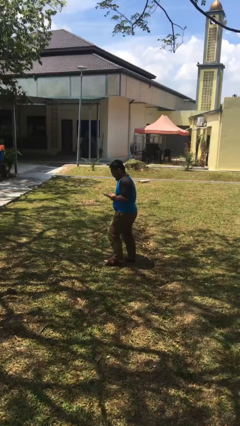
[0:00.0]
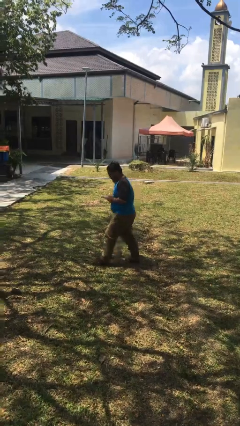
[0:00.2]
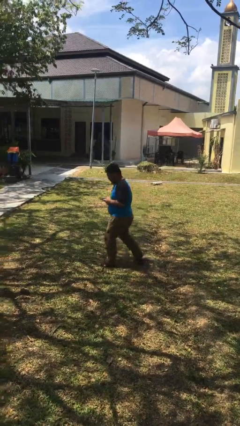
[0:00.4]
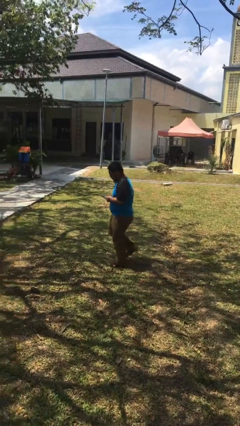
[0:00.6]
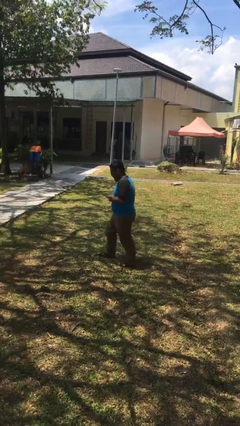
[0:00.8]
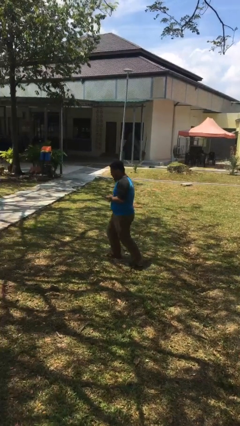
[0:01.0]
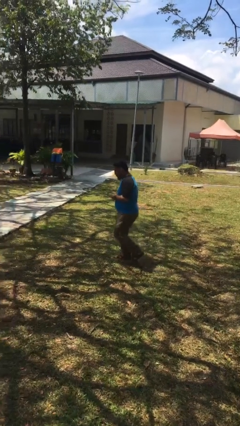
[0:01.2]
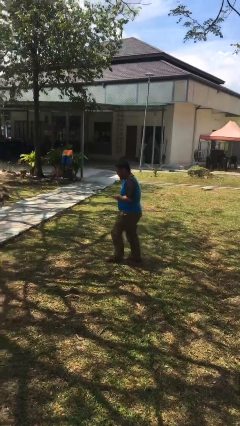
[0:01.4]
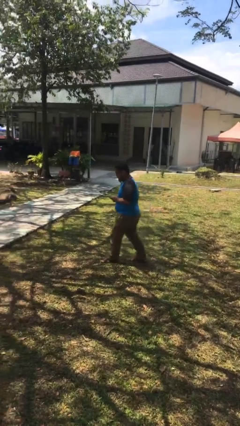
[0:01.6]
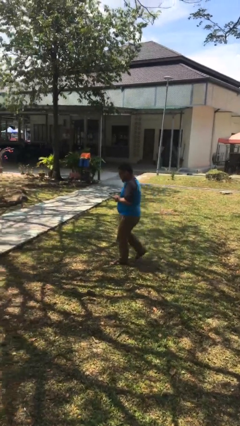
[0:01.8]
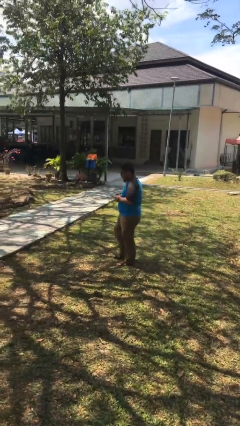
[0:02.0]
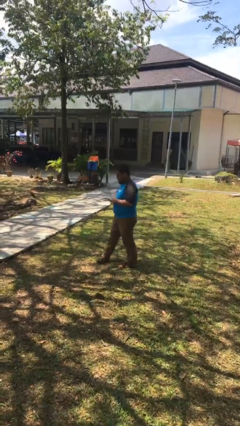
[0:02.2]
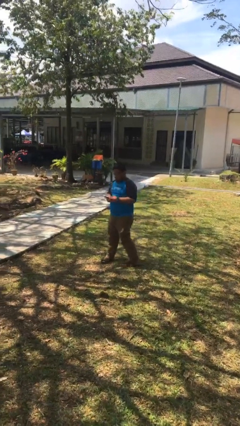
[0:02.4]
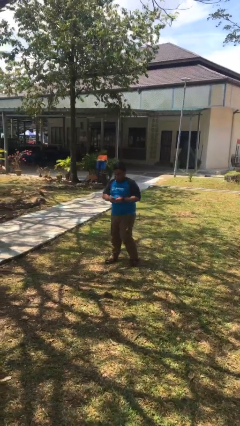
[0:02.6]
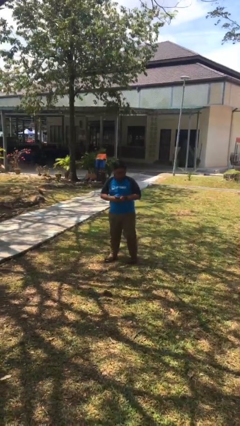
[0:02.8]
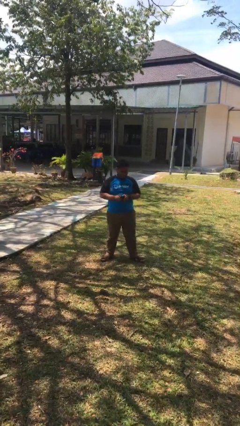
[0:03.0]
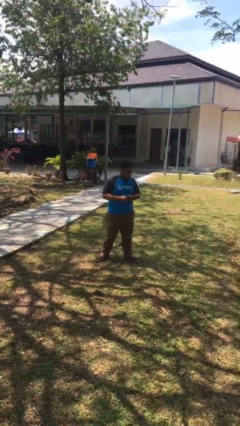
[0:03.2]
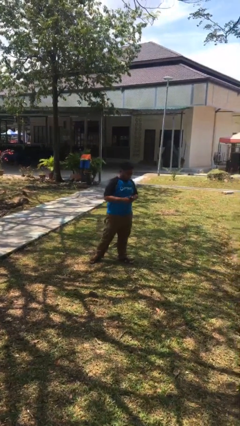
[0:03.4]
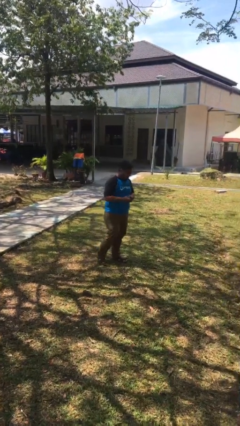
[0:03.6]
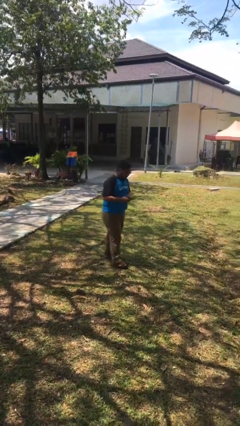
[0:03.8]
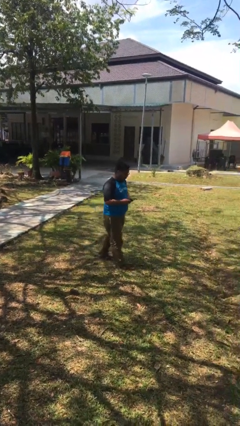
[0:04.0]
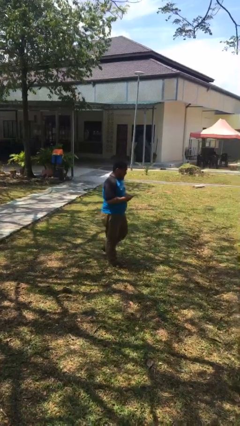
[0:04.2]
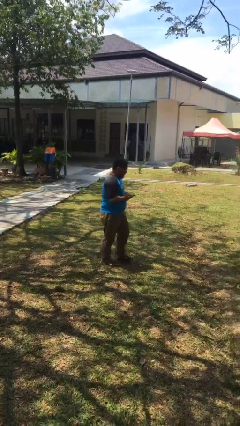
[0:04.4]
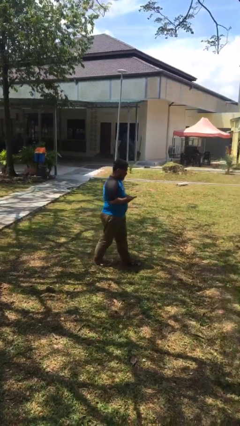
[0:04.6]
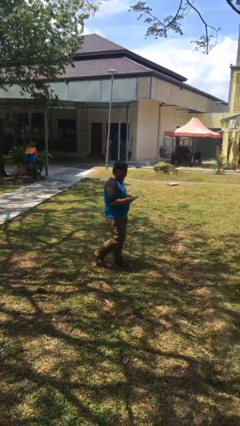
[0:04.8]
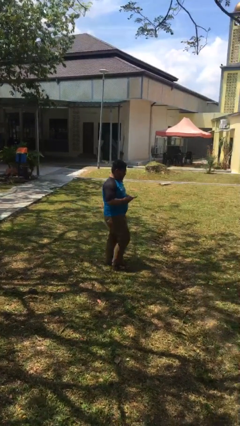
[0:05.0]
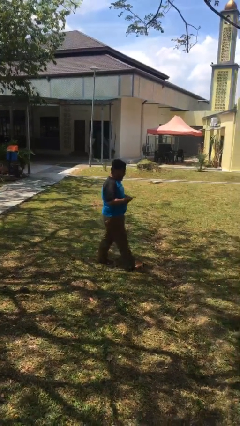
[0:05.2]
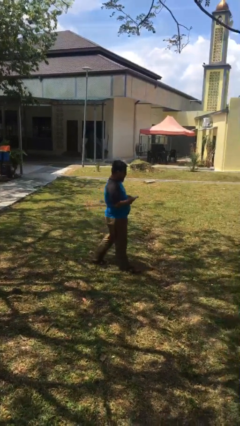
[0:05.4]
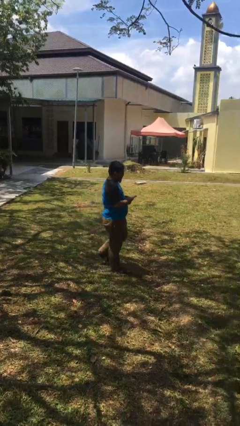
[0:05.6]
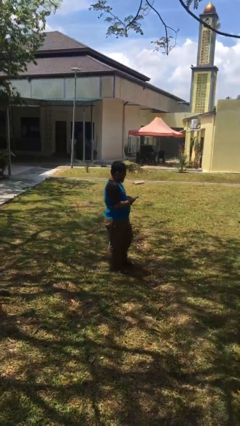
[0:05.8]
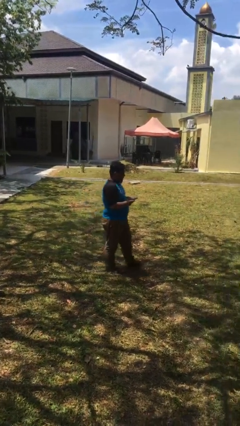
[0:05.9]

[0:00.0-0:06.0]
person texts on phone

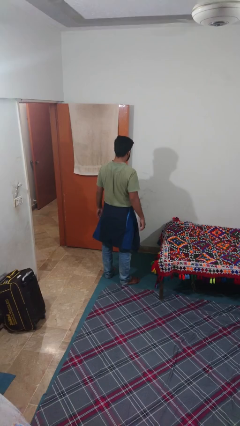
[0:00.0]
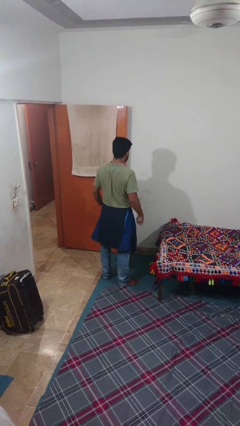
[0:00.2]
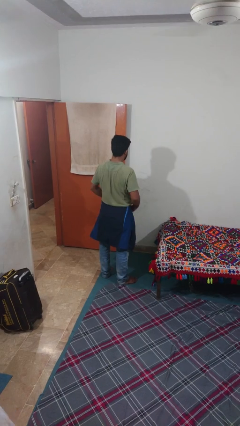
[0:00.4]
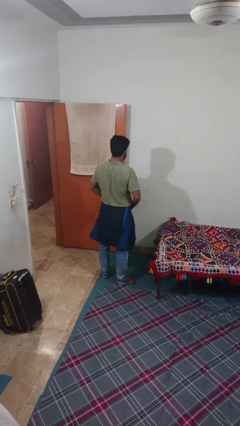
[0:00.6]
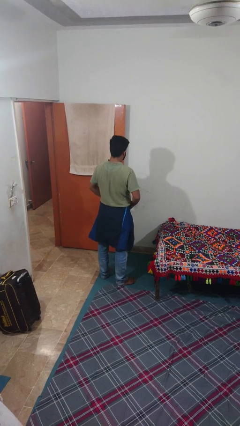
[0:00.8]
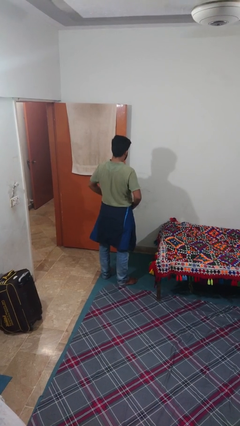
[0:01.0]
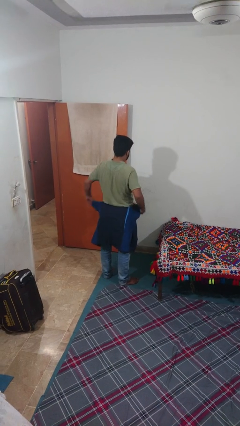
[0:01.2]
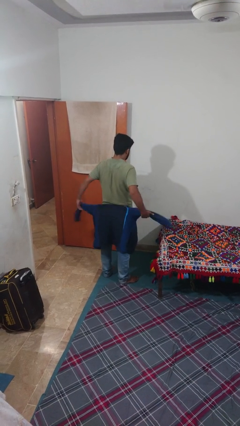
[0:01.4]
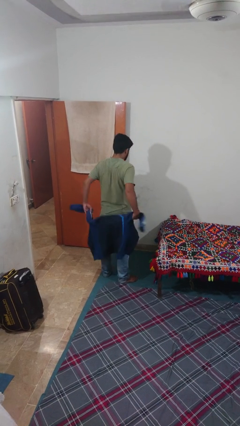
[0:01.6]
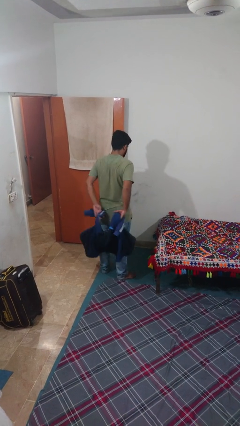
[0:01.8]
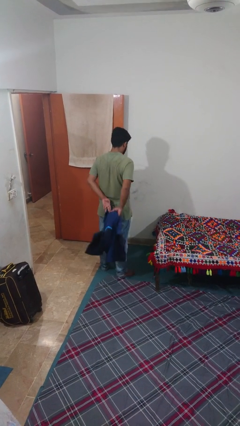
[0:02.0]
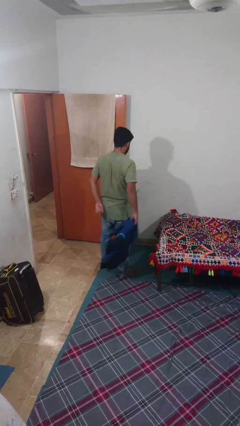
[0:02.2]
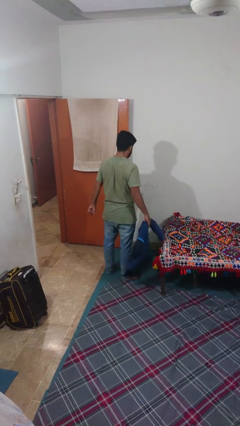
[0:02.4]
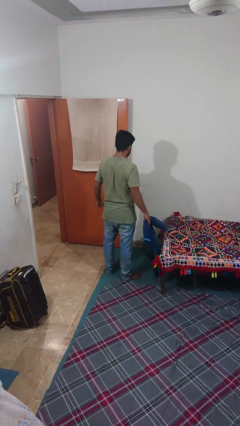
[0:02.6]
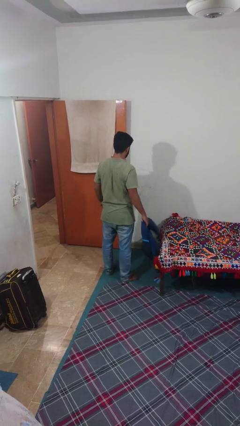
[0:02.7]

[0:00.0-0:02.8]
person unties jacket around waist

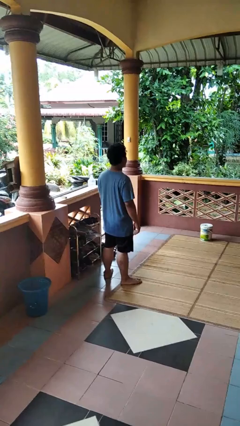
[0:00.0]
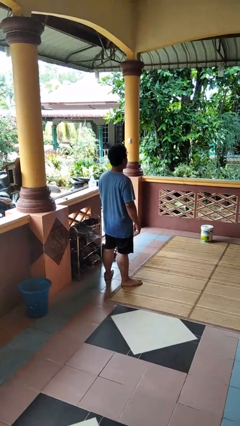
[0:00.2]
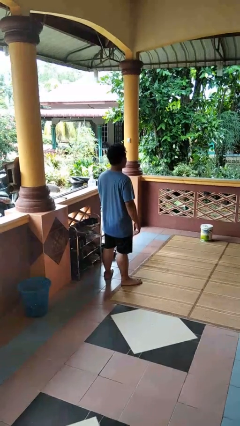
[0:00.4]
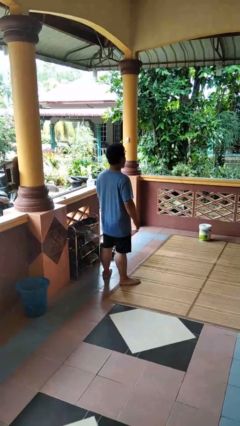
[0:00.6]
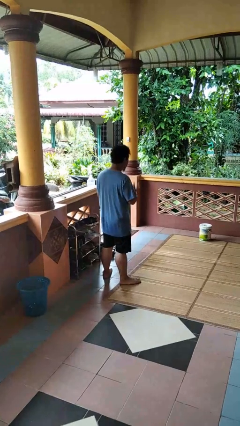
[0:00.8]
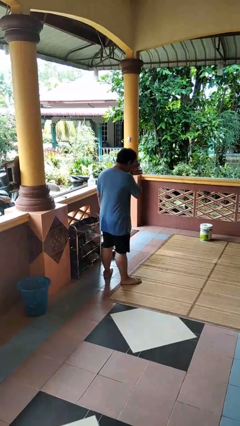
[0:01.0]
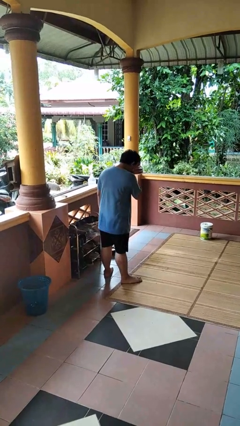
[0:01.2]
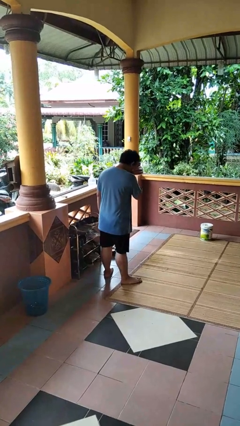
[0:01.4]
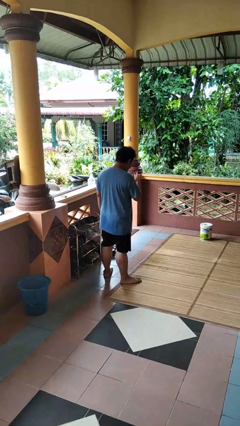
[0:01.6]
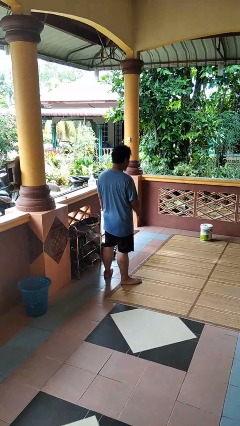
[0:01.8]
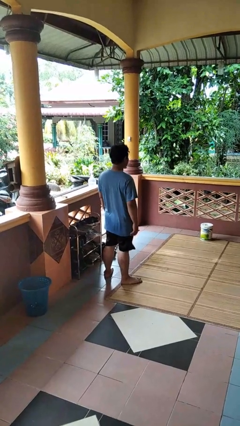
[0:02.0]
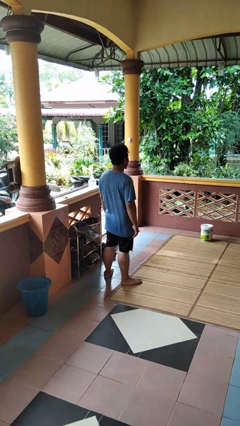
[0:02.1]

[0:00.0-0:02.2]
person sneezes into hand

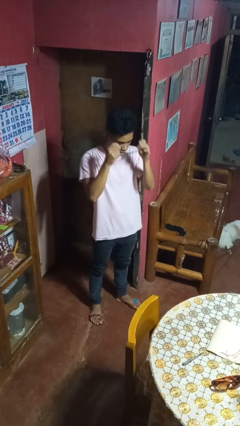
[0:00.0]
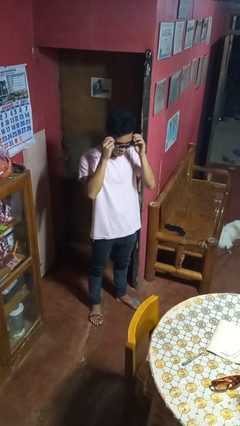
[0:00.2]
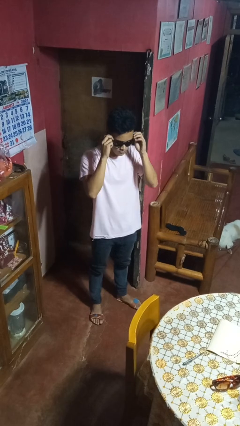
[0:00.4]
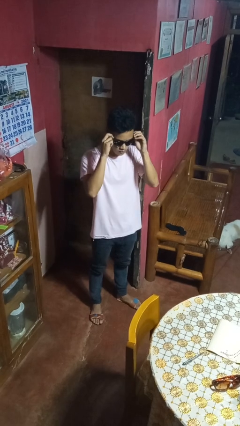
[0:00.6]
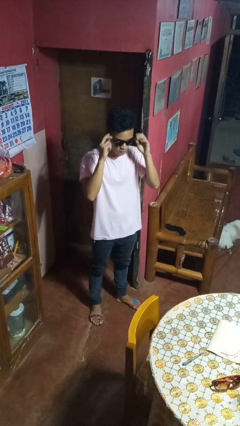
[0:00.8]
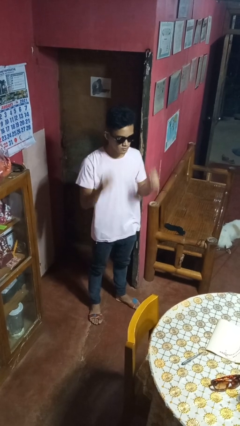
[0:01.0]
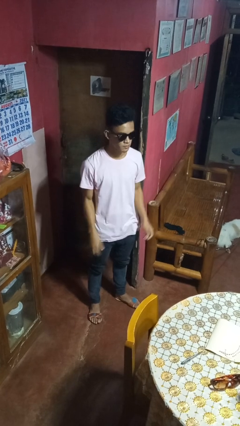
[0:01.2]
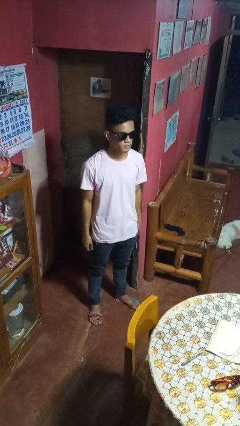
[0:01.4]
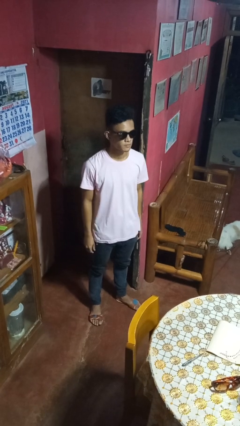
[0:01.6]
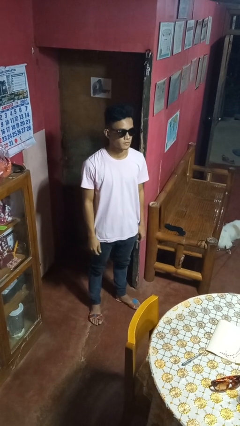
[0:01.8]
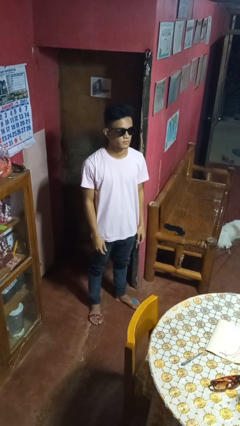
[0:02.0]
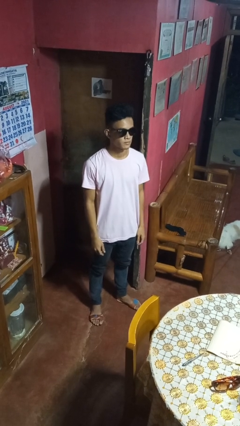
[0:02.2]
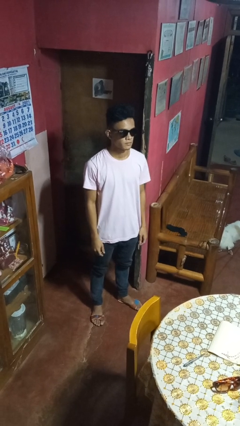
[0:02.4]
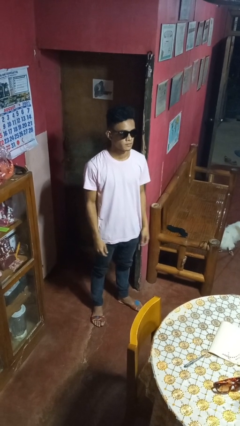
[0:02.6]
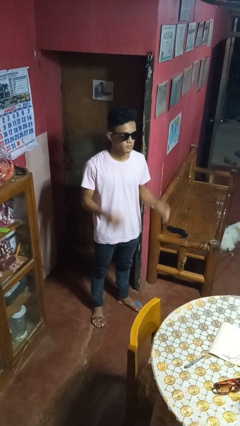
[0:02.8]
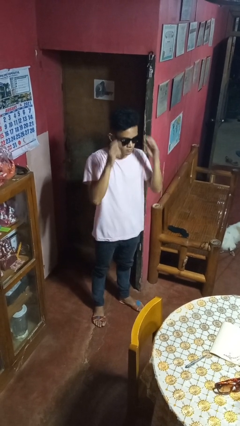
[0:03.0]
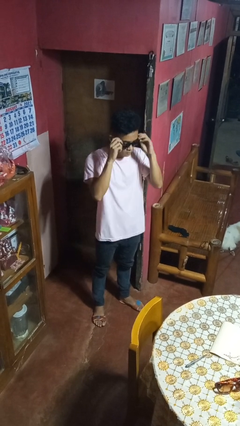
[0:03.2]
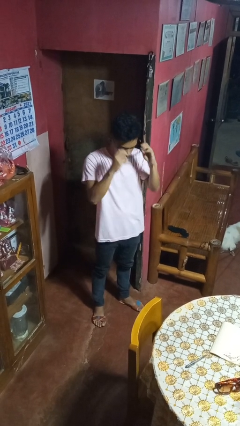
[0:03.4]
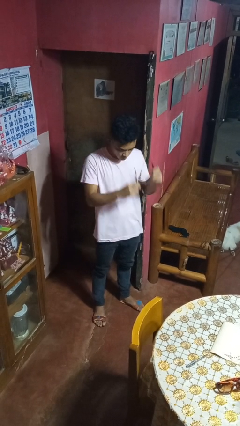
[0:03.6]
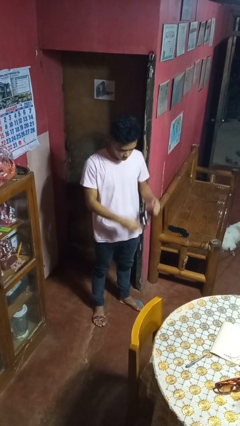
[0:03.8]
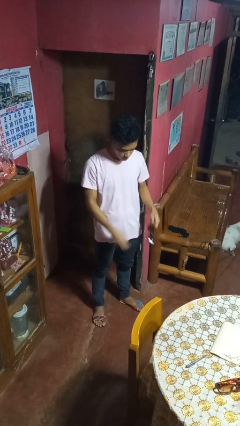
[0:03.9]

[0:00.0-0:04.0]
person puts on sunglasses

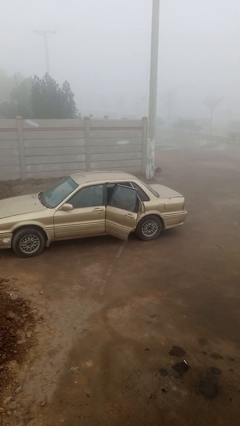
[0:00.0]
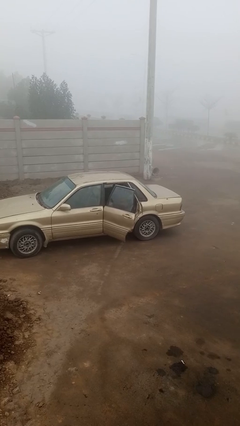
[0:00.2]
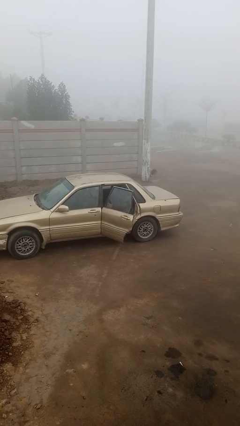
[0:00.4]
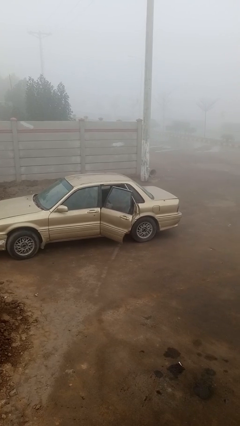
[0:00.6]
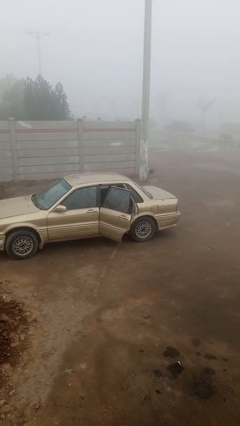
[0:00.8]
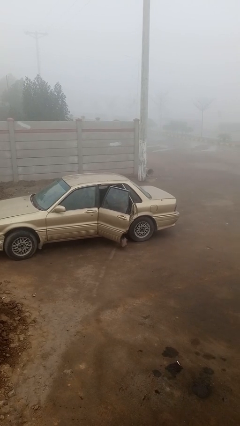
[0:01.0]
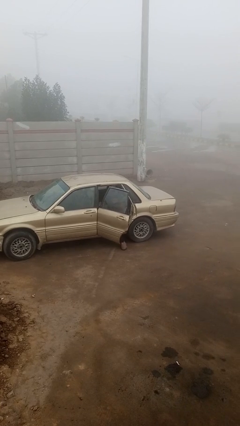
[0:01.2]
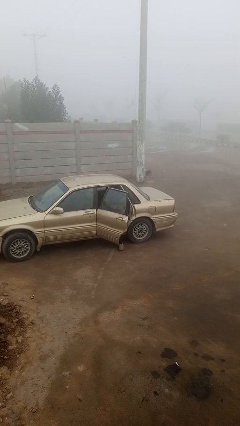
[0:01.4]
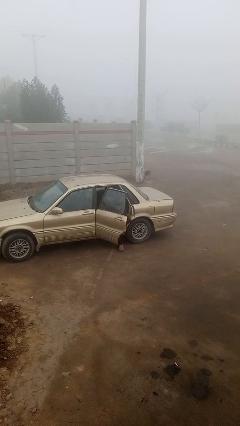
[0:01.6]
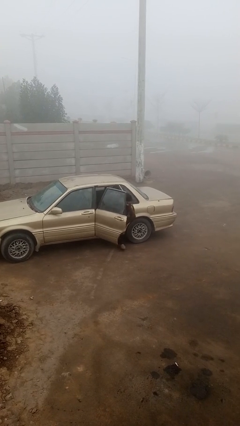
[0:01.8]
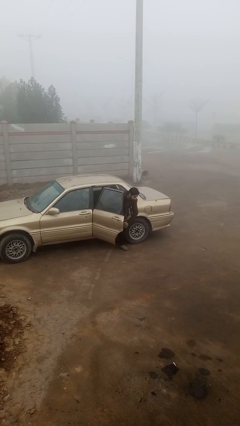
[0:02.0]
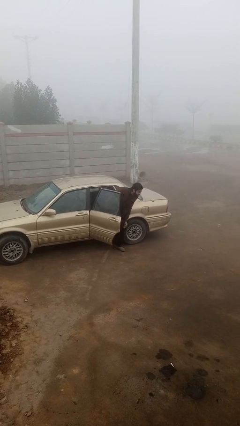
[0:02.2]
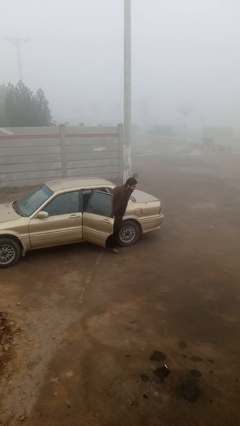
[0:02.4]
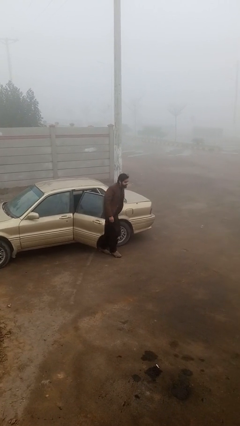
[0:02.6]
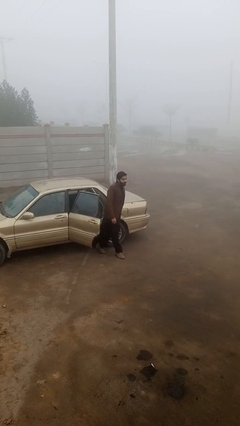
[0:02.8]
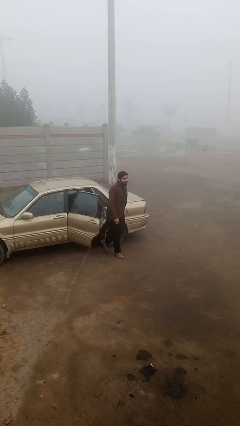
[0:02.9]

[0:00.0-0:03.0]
person exits car
